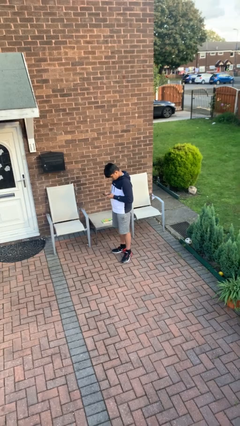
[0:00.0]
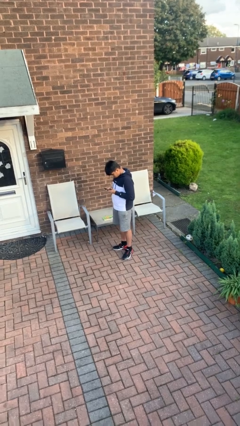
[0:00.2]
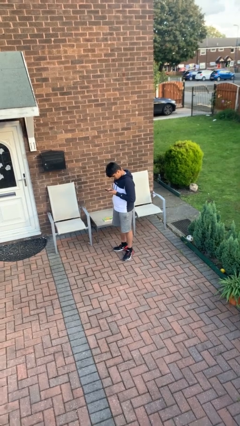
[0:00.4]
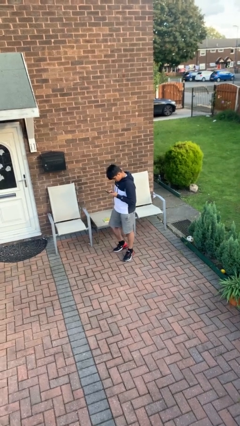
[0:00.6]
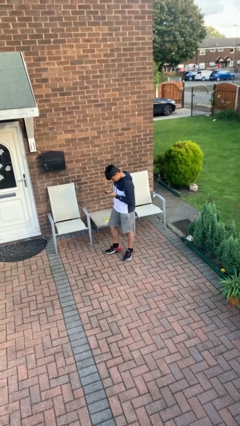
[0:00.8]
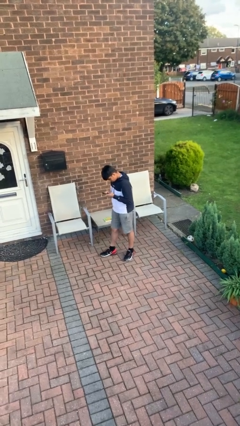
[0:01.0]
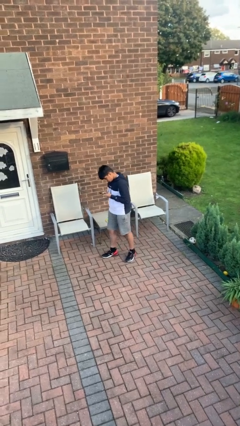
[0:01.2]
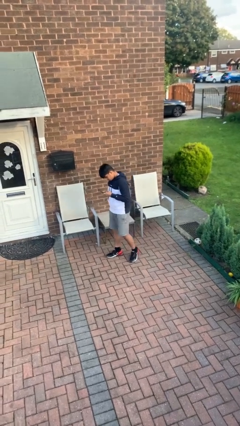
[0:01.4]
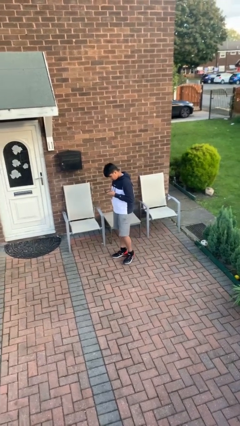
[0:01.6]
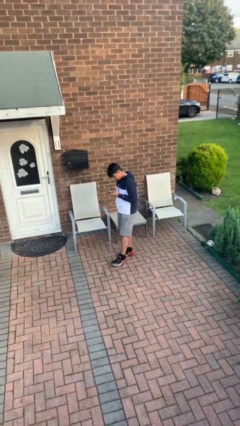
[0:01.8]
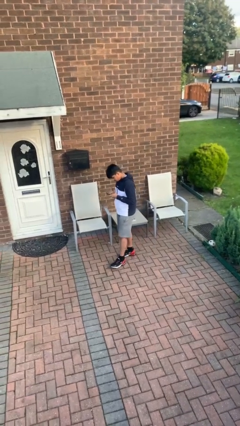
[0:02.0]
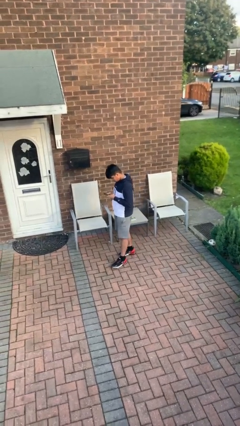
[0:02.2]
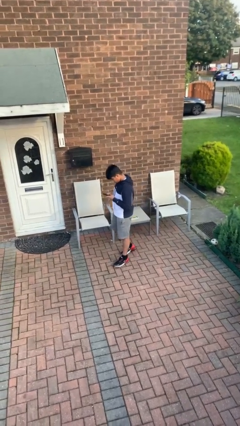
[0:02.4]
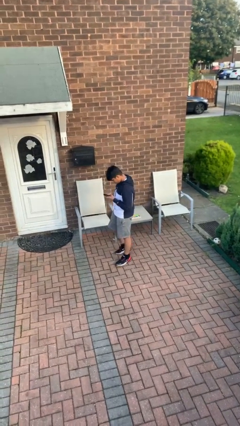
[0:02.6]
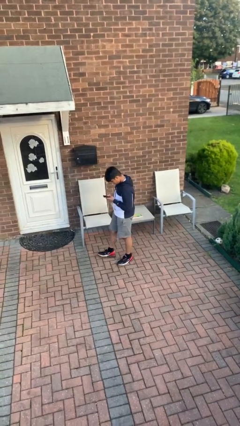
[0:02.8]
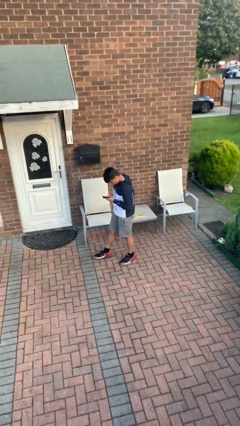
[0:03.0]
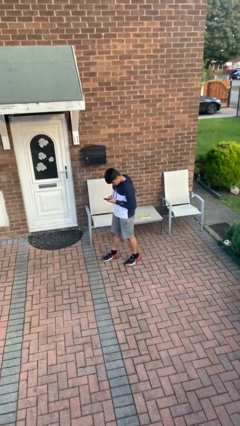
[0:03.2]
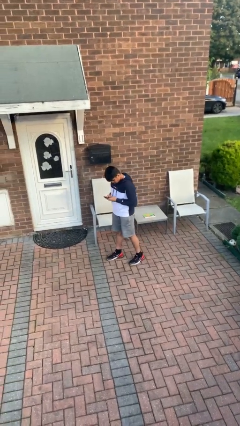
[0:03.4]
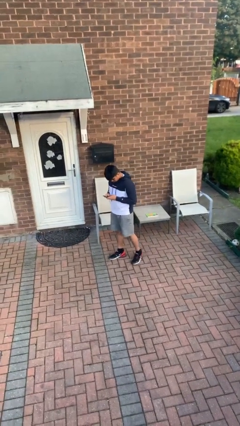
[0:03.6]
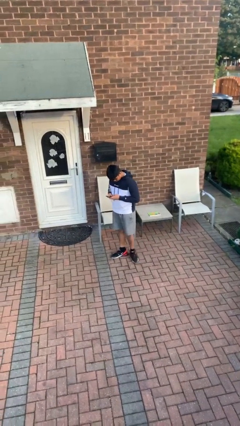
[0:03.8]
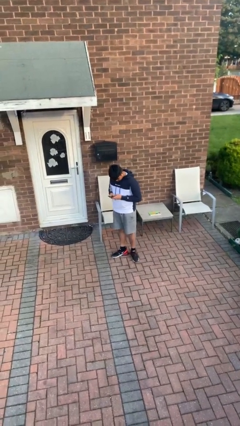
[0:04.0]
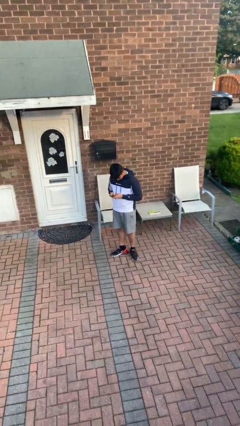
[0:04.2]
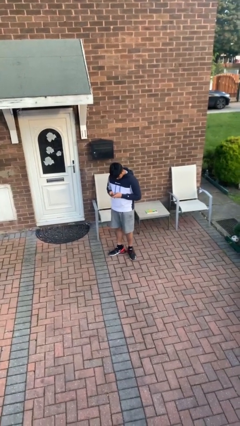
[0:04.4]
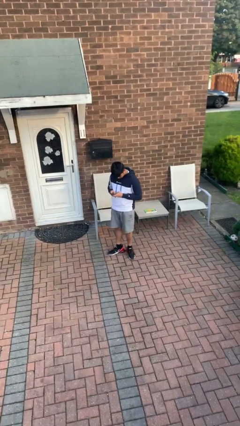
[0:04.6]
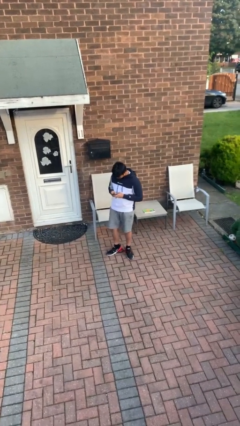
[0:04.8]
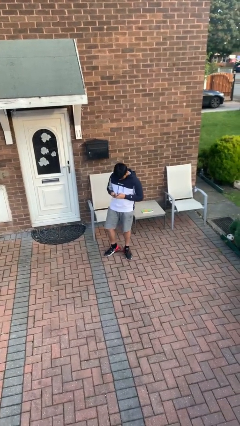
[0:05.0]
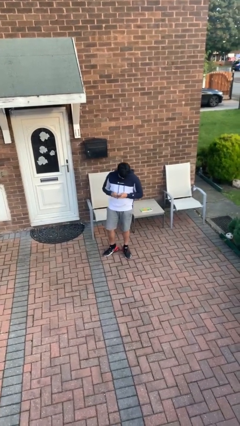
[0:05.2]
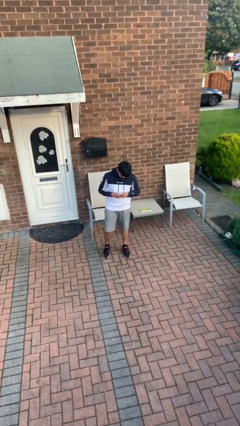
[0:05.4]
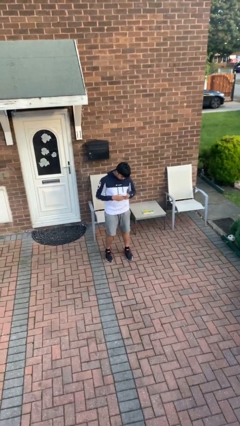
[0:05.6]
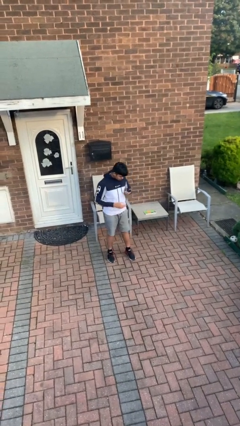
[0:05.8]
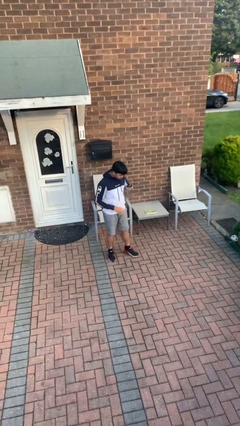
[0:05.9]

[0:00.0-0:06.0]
person texts on phone

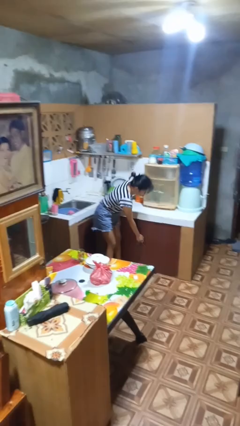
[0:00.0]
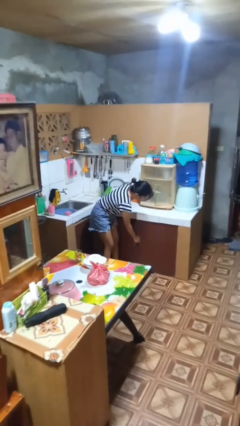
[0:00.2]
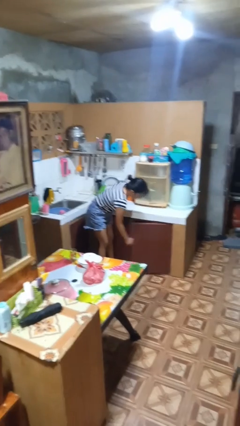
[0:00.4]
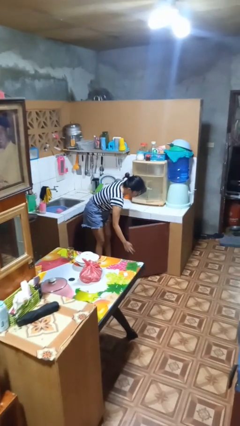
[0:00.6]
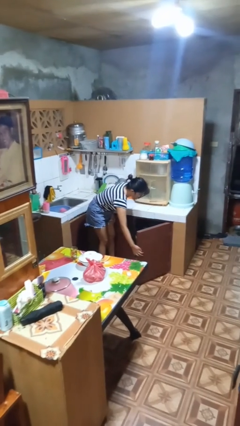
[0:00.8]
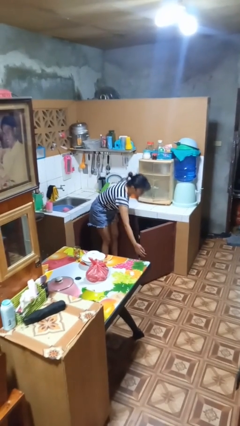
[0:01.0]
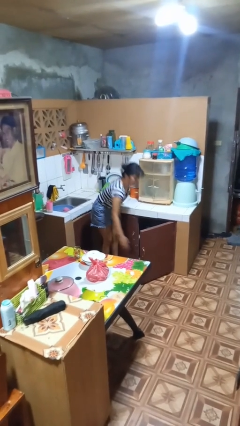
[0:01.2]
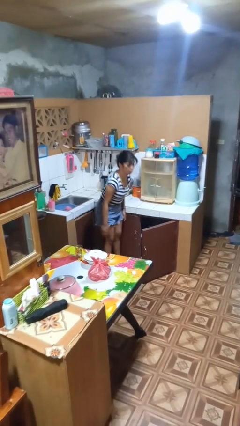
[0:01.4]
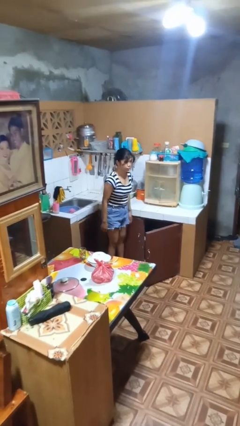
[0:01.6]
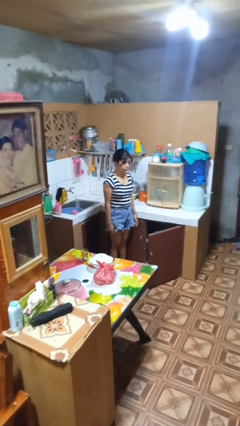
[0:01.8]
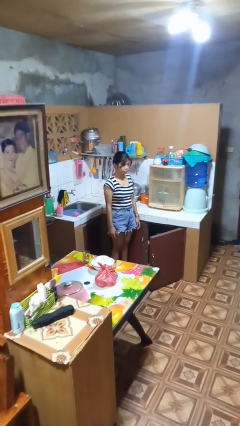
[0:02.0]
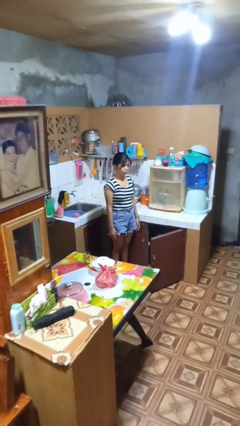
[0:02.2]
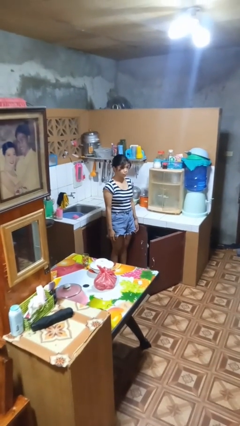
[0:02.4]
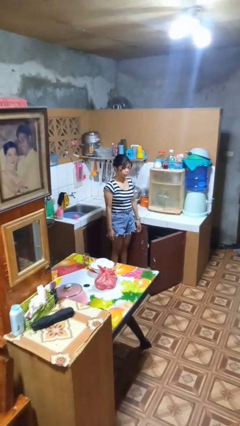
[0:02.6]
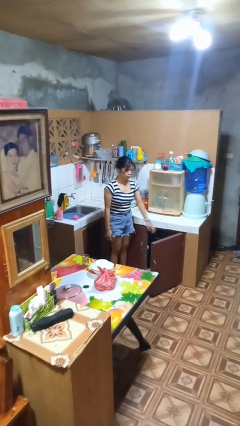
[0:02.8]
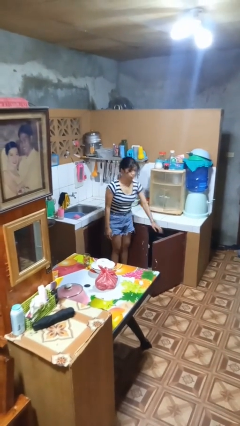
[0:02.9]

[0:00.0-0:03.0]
person opens cabinet

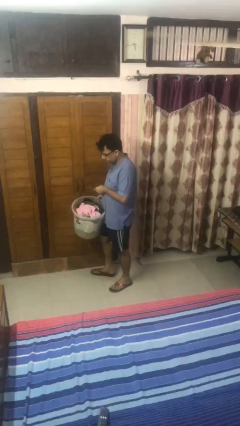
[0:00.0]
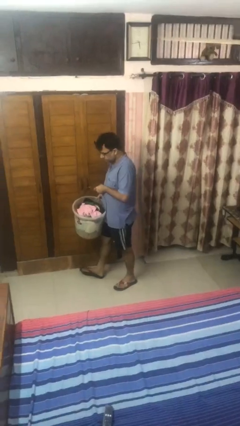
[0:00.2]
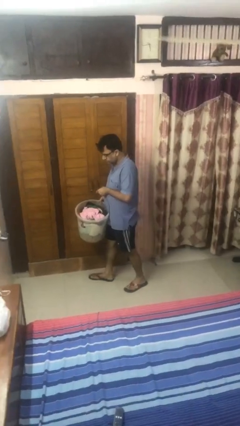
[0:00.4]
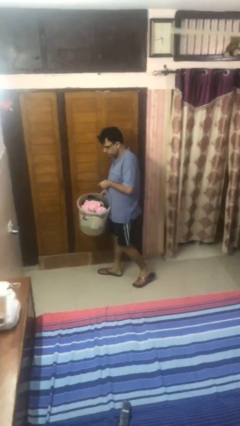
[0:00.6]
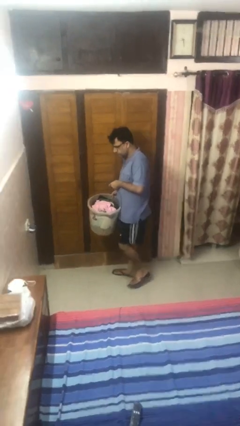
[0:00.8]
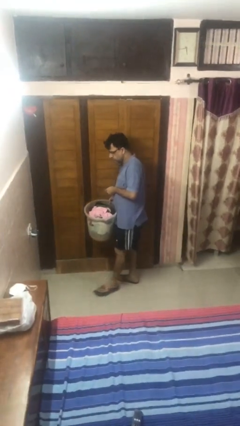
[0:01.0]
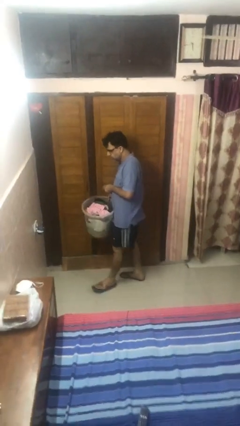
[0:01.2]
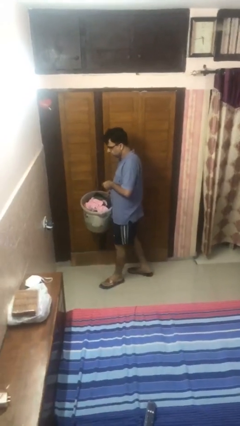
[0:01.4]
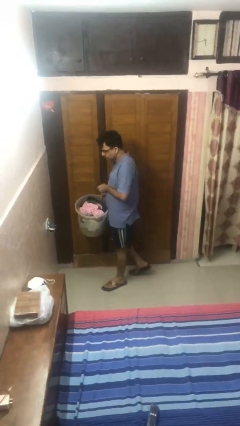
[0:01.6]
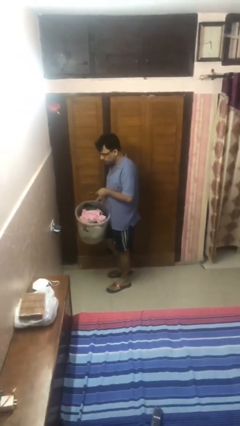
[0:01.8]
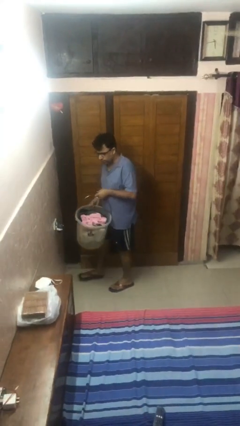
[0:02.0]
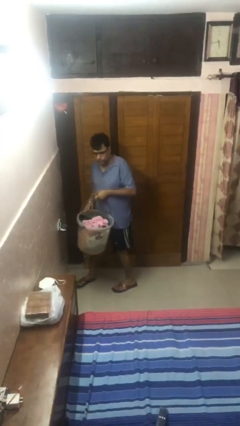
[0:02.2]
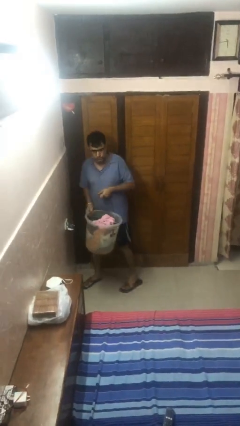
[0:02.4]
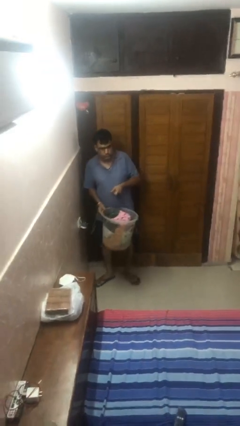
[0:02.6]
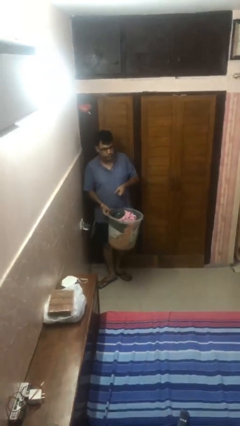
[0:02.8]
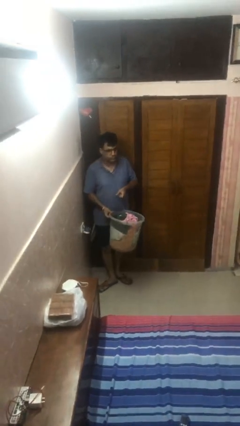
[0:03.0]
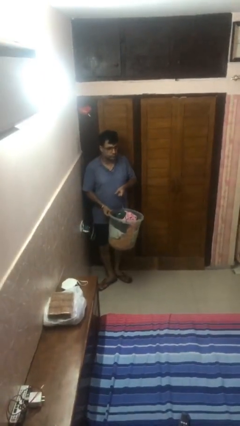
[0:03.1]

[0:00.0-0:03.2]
person carries laundry basket

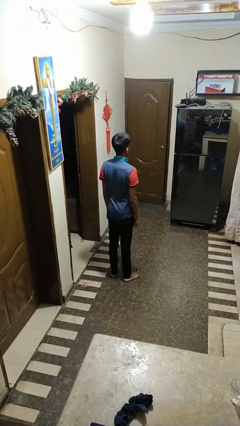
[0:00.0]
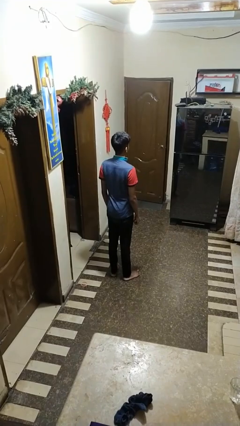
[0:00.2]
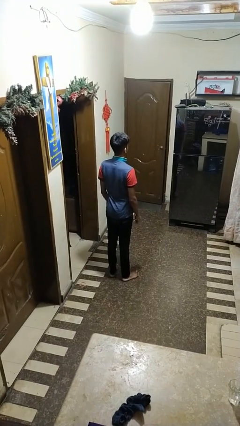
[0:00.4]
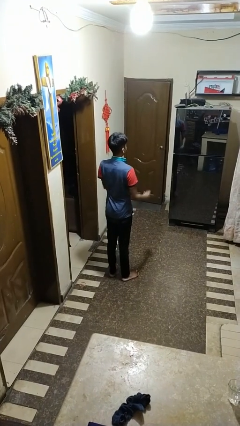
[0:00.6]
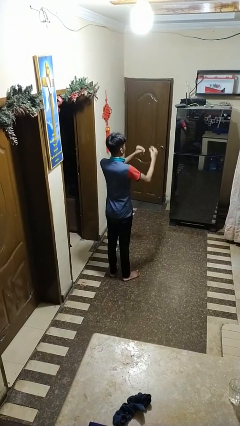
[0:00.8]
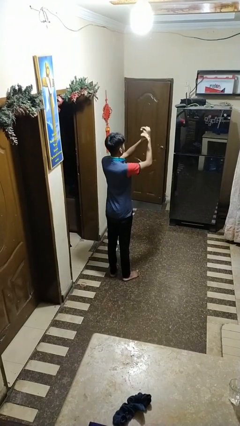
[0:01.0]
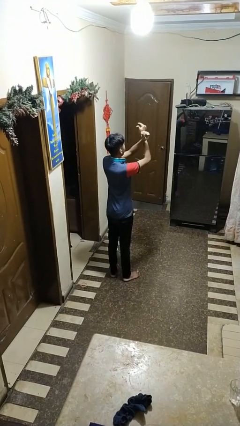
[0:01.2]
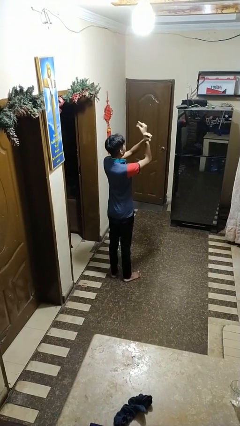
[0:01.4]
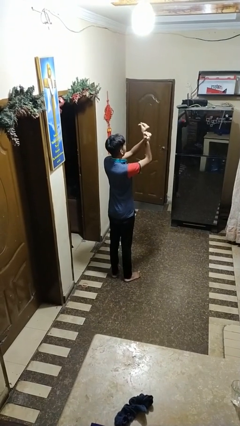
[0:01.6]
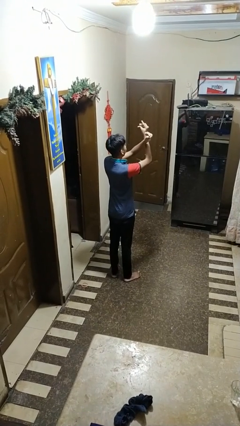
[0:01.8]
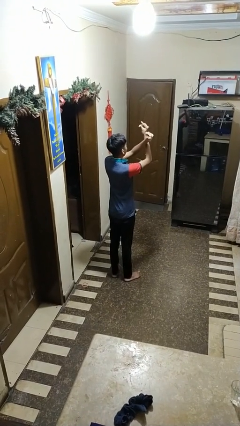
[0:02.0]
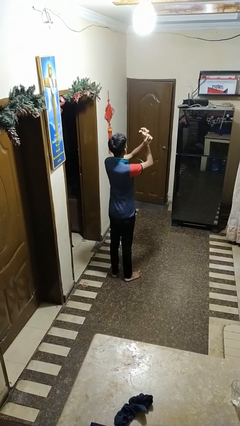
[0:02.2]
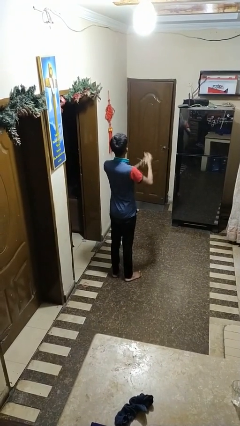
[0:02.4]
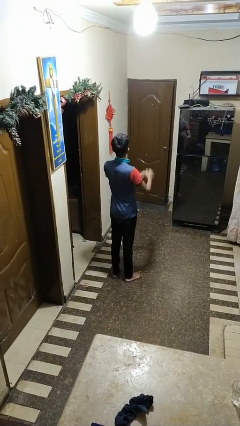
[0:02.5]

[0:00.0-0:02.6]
person snaps fingers

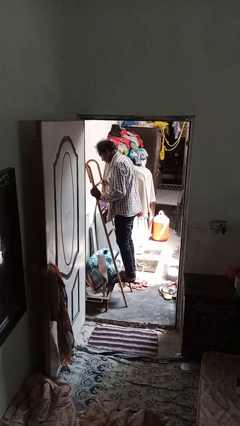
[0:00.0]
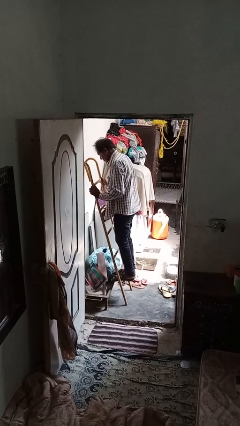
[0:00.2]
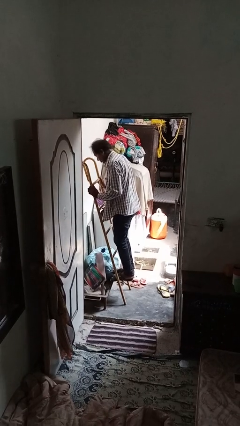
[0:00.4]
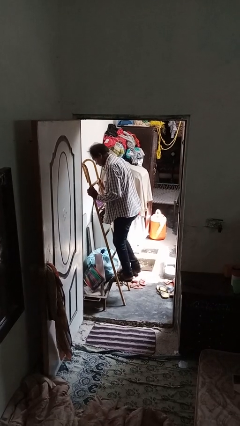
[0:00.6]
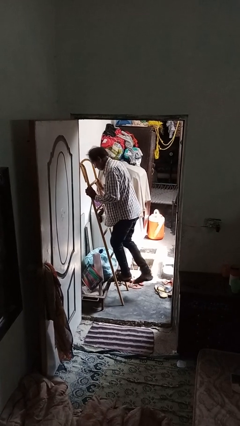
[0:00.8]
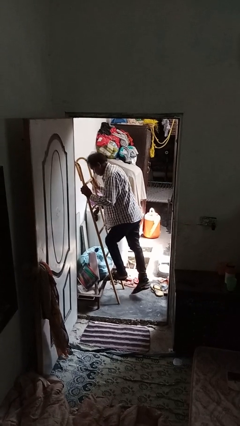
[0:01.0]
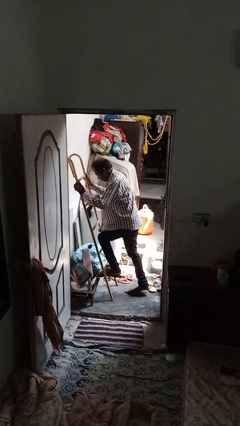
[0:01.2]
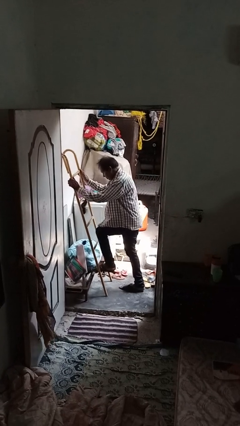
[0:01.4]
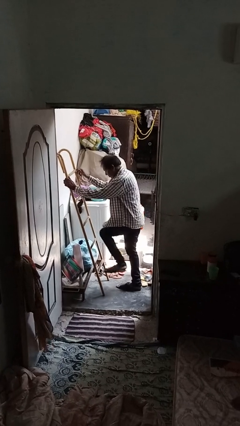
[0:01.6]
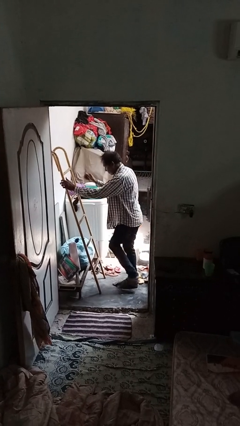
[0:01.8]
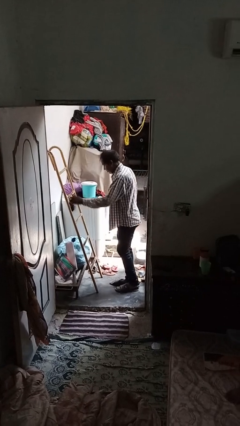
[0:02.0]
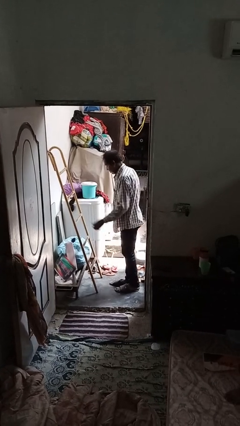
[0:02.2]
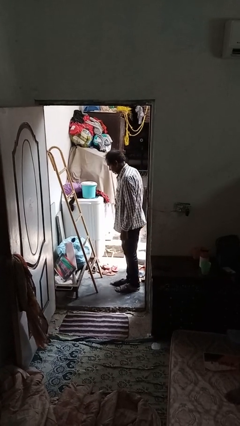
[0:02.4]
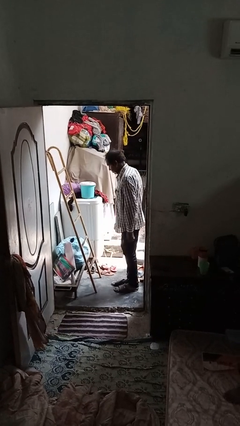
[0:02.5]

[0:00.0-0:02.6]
person climbs down ladder

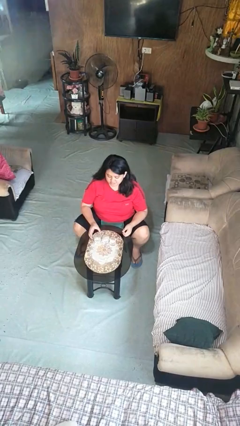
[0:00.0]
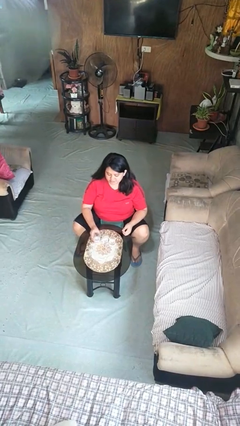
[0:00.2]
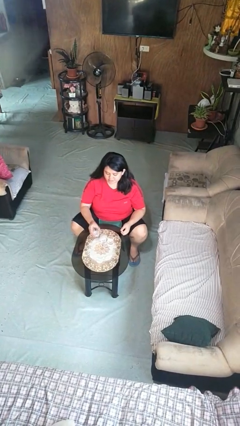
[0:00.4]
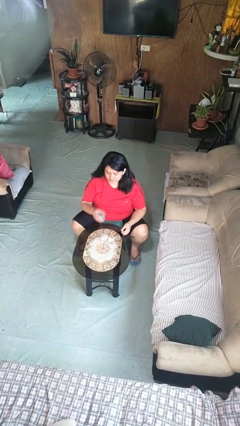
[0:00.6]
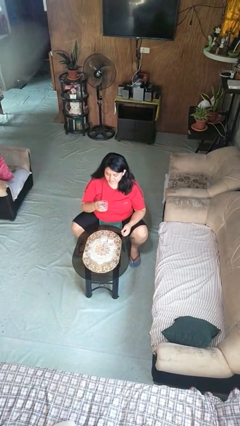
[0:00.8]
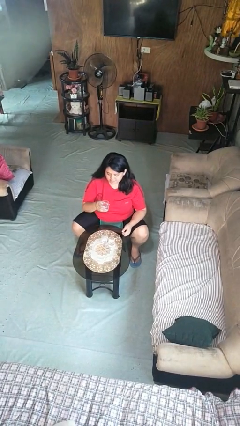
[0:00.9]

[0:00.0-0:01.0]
person picks up object from table
